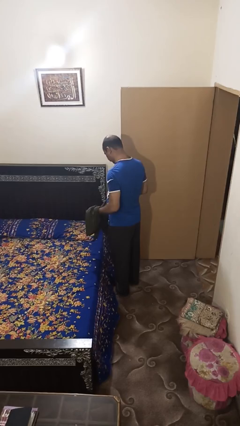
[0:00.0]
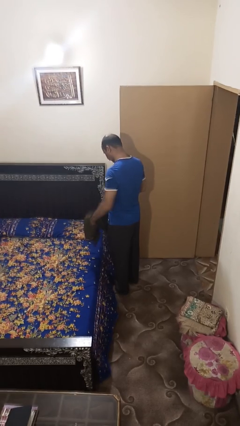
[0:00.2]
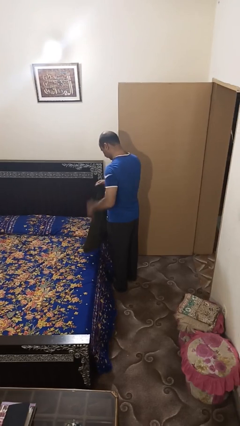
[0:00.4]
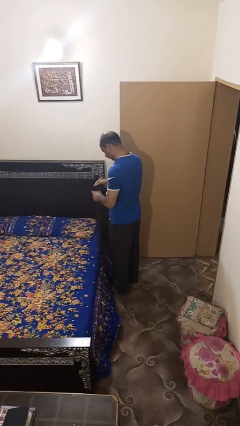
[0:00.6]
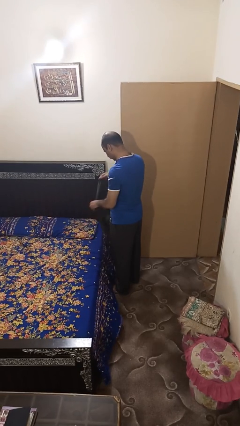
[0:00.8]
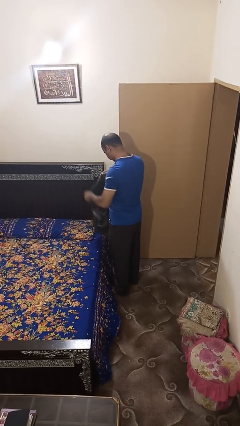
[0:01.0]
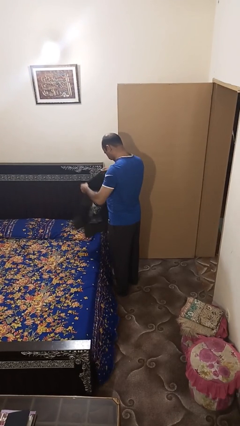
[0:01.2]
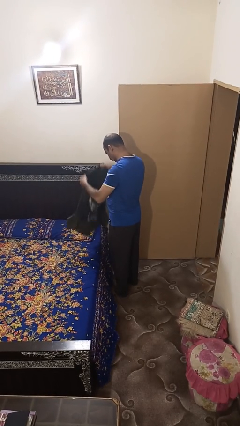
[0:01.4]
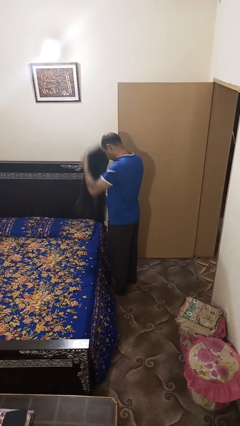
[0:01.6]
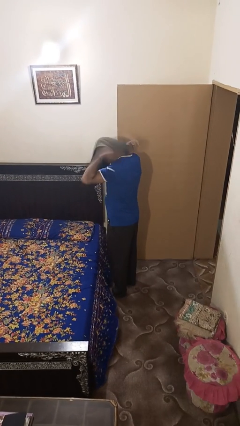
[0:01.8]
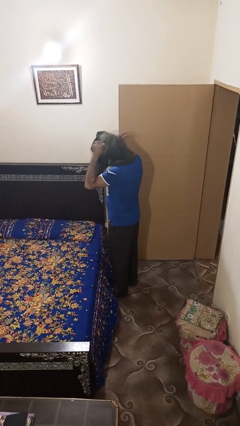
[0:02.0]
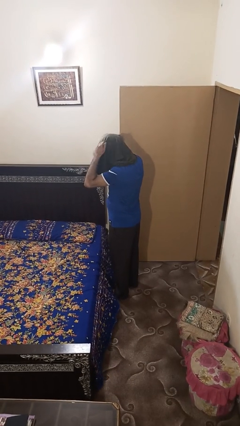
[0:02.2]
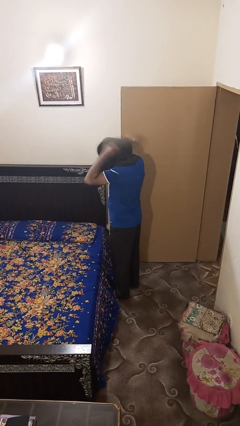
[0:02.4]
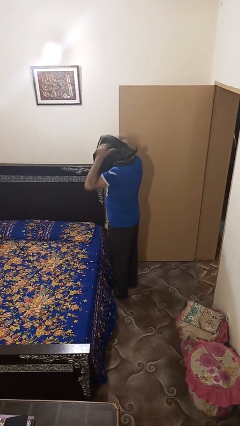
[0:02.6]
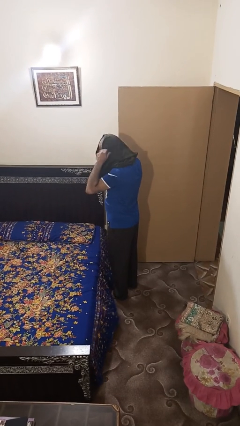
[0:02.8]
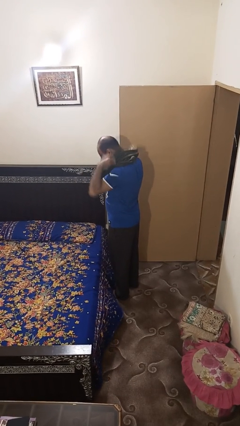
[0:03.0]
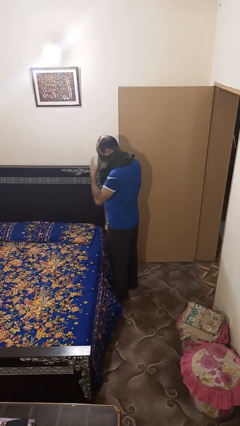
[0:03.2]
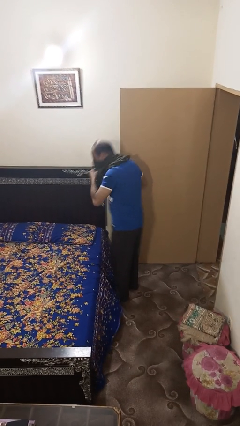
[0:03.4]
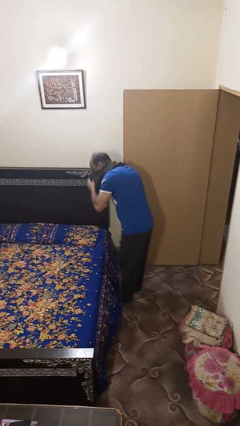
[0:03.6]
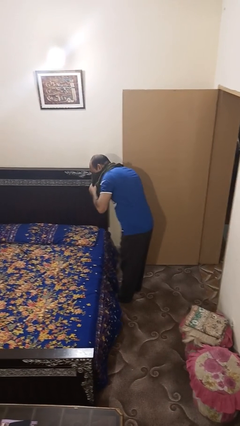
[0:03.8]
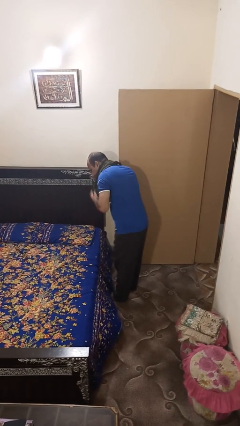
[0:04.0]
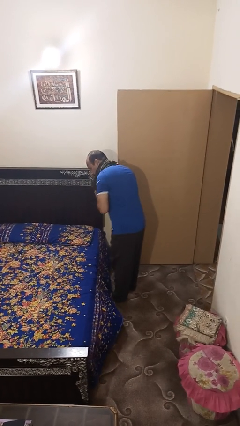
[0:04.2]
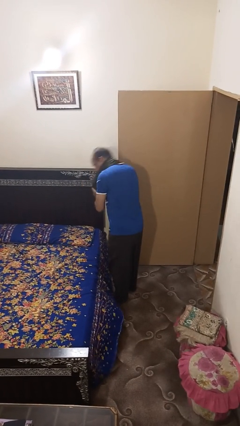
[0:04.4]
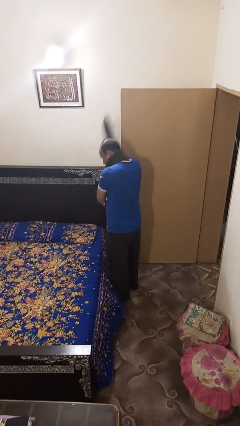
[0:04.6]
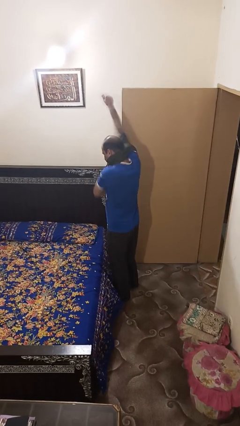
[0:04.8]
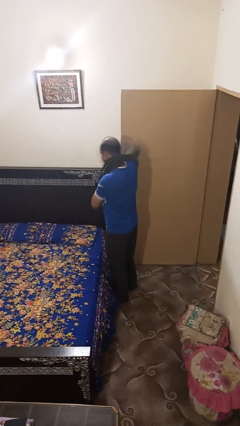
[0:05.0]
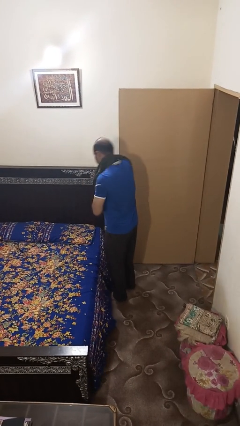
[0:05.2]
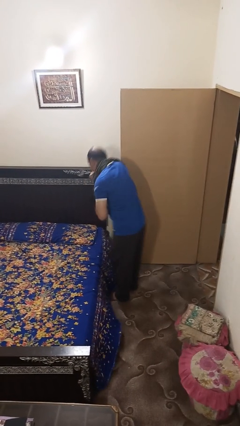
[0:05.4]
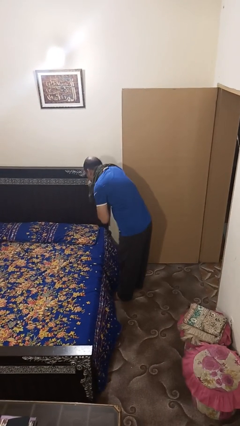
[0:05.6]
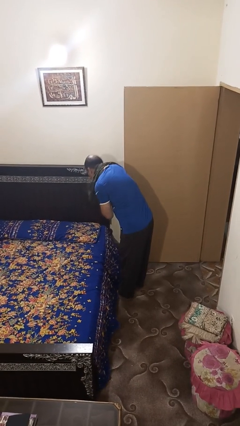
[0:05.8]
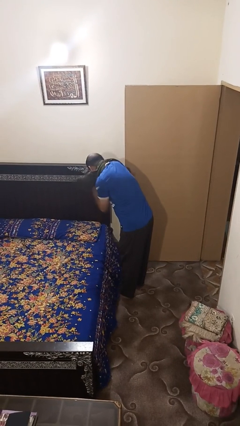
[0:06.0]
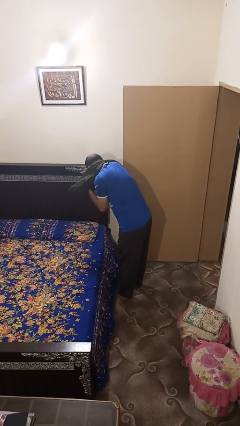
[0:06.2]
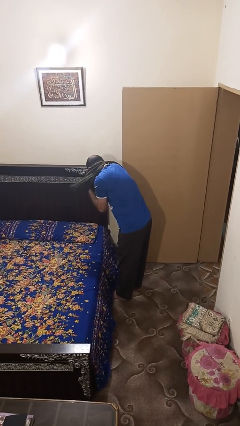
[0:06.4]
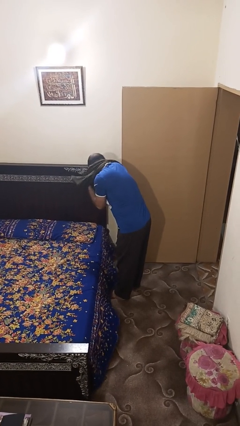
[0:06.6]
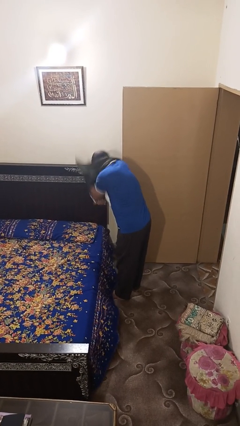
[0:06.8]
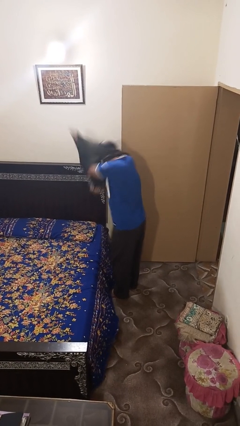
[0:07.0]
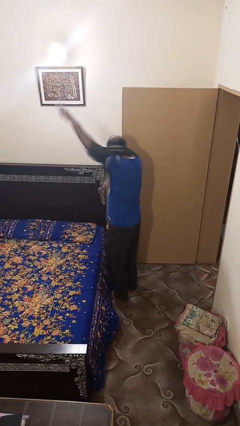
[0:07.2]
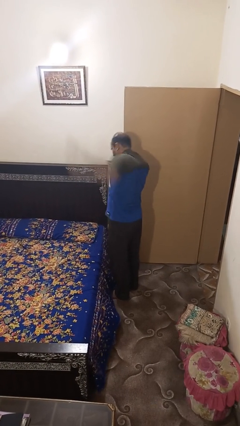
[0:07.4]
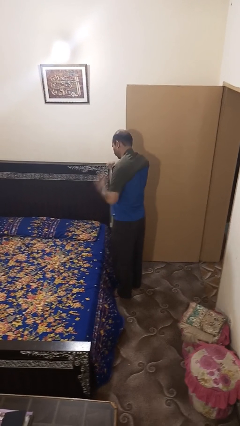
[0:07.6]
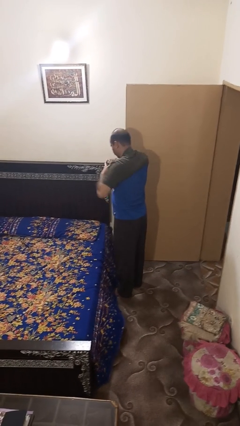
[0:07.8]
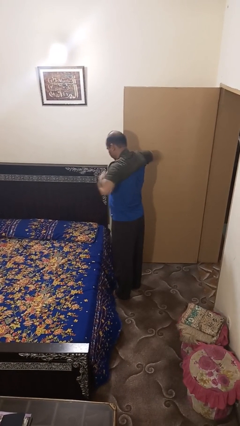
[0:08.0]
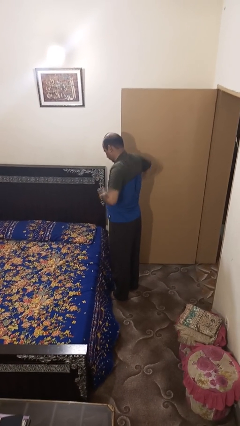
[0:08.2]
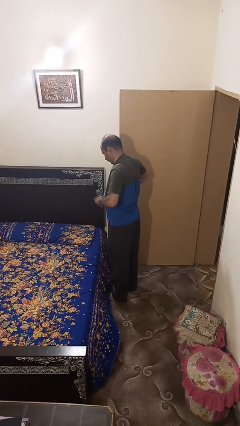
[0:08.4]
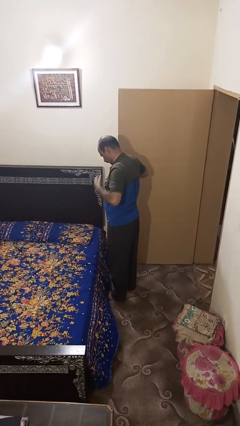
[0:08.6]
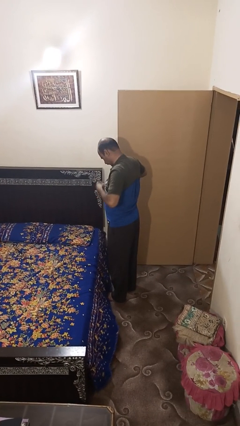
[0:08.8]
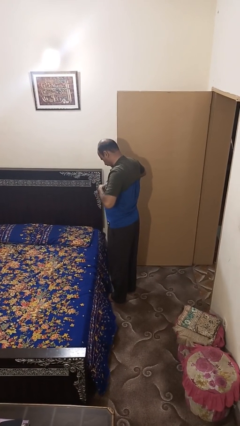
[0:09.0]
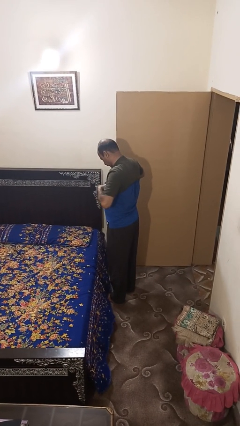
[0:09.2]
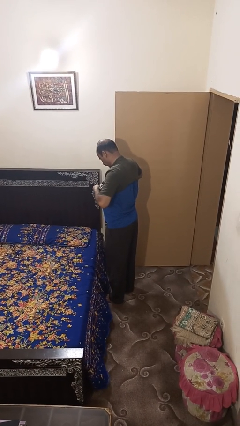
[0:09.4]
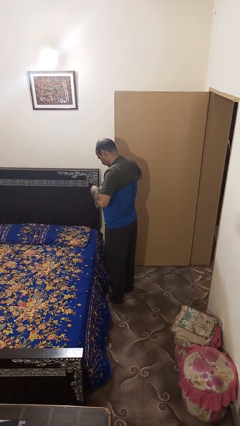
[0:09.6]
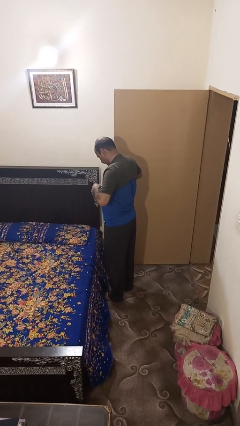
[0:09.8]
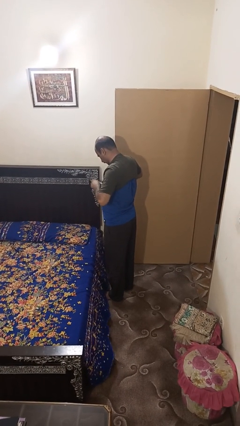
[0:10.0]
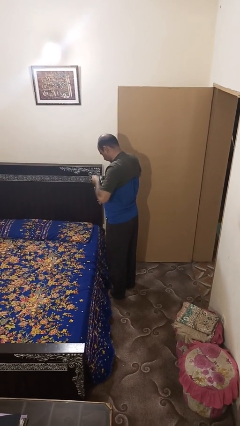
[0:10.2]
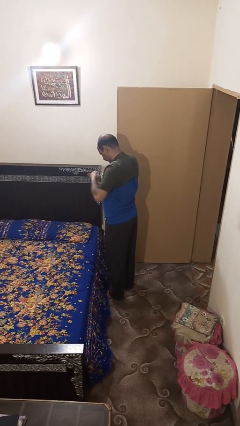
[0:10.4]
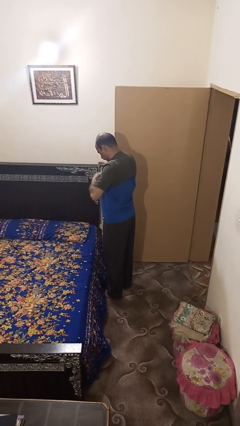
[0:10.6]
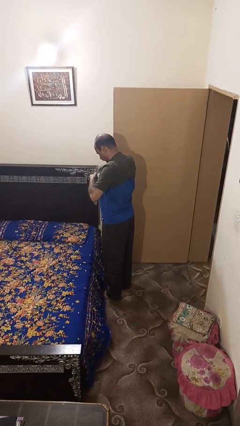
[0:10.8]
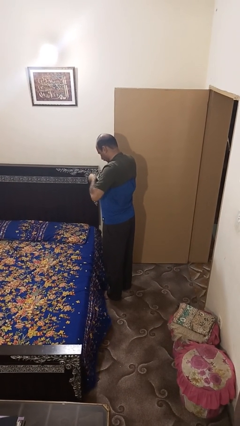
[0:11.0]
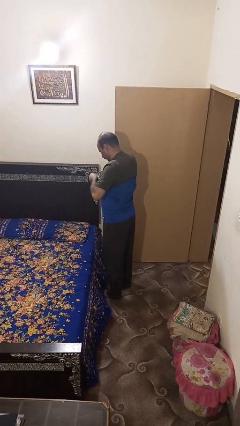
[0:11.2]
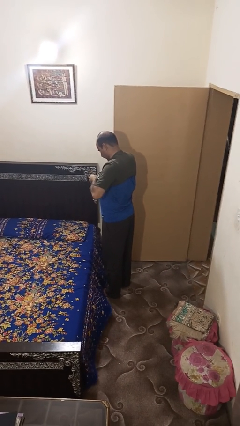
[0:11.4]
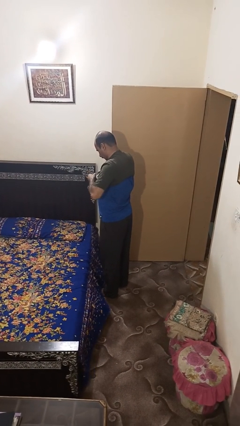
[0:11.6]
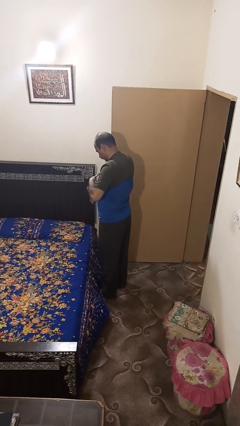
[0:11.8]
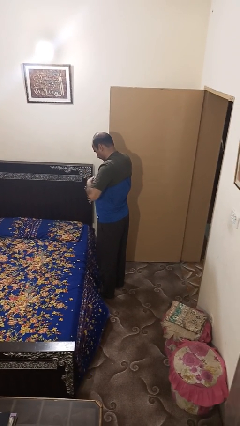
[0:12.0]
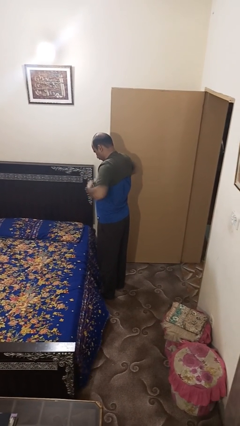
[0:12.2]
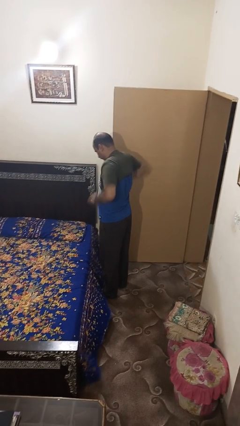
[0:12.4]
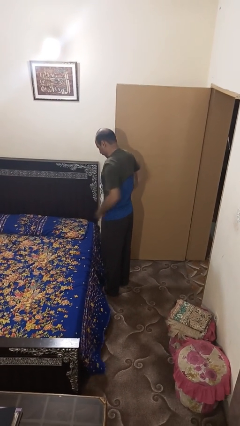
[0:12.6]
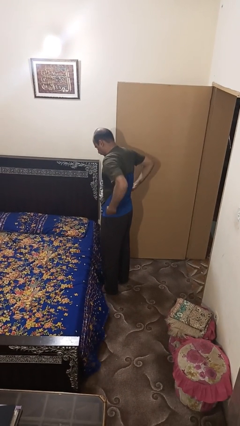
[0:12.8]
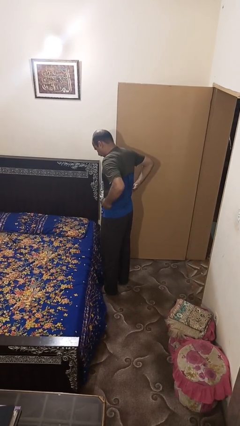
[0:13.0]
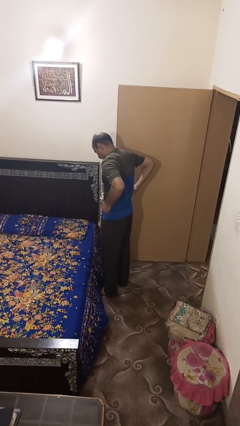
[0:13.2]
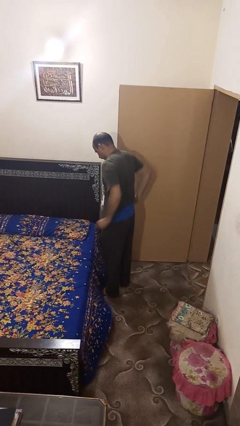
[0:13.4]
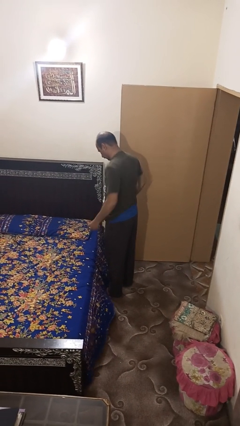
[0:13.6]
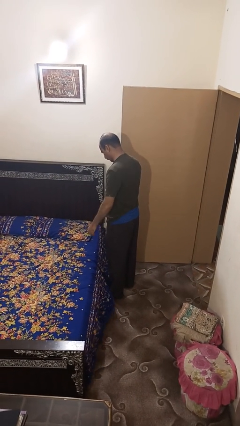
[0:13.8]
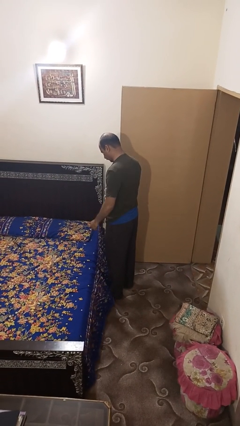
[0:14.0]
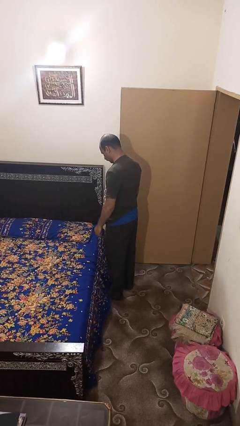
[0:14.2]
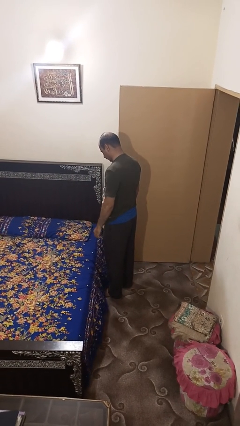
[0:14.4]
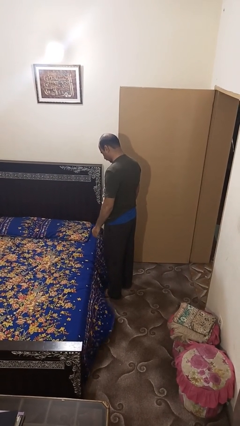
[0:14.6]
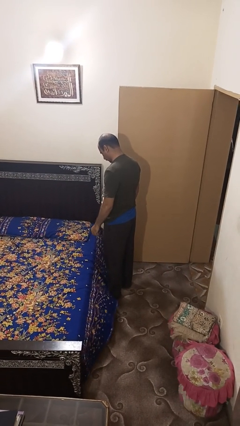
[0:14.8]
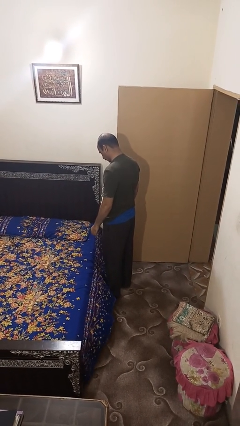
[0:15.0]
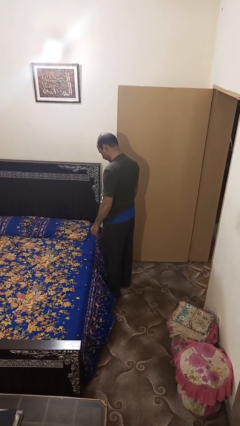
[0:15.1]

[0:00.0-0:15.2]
person puts on shirt

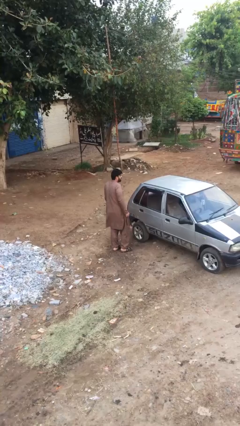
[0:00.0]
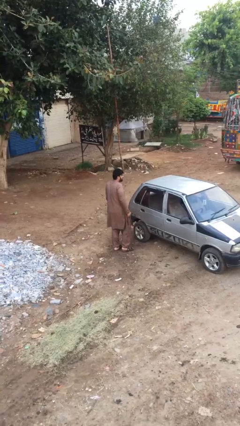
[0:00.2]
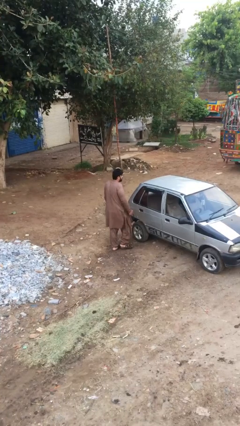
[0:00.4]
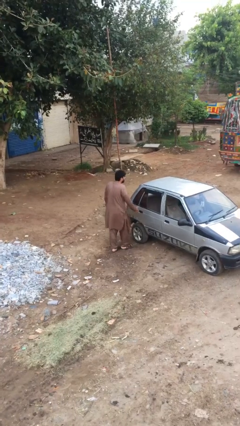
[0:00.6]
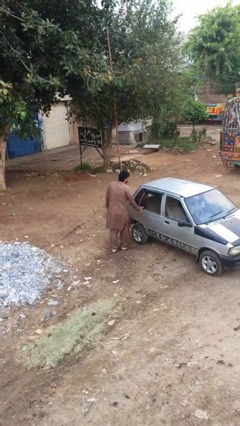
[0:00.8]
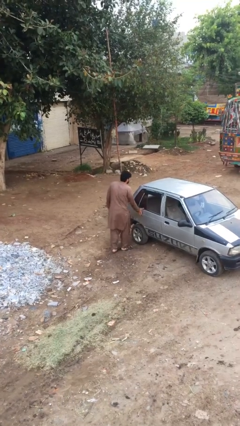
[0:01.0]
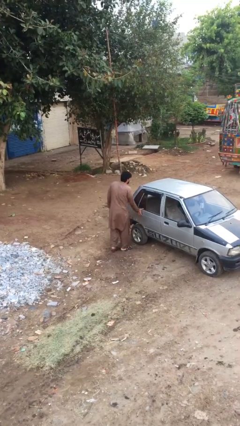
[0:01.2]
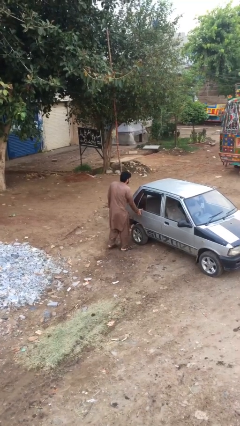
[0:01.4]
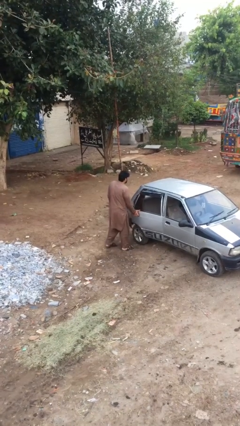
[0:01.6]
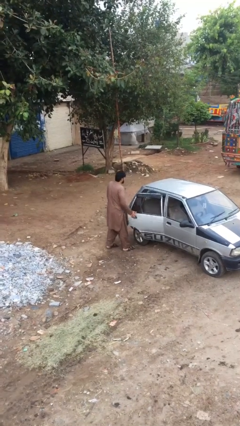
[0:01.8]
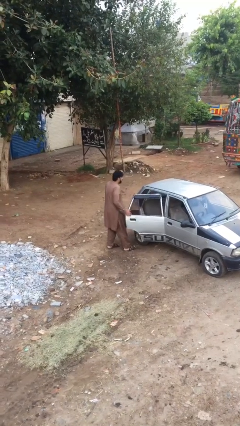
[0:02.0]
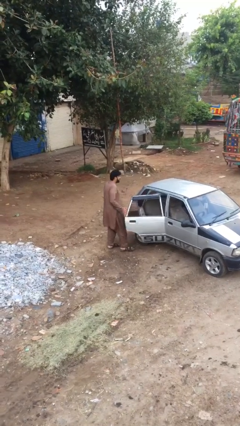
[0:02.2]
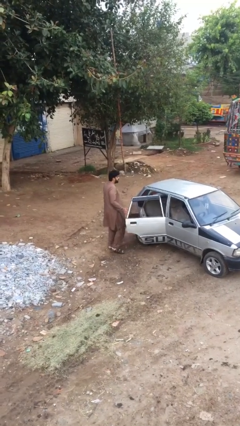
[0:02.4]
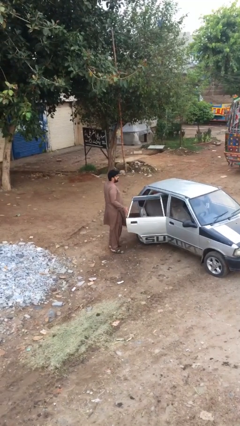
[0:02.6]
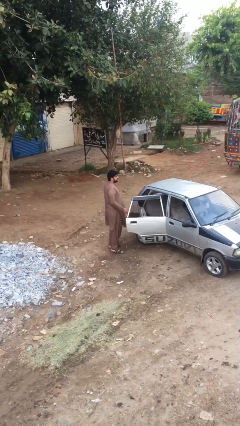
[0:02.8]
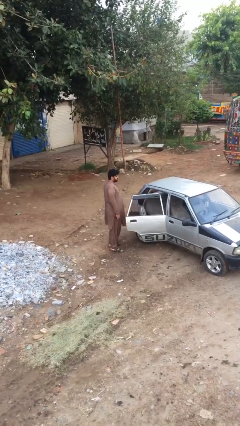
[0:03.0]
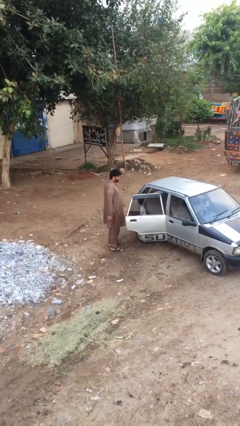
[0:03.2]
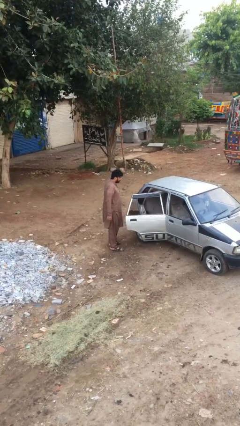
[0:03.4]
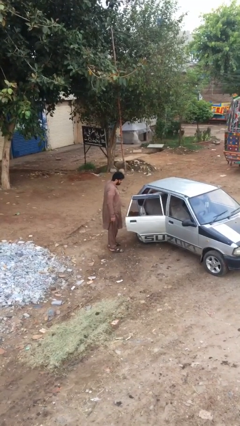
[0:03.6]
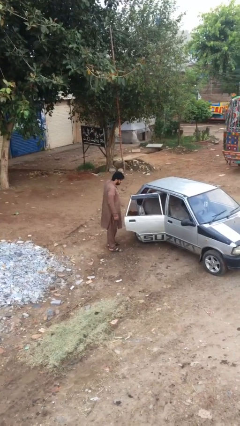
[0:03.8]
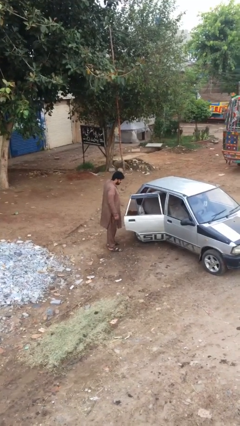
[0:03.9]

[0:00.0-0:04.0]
person opens car door
